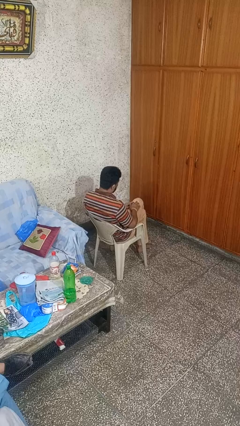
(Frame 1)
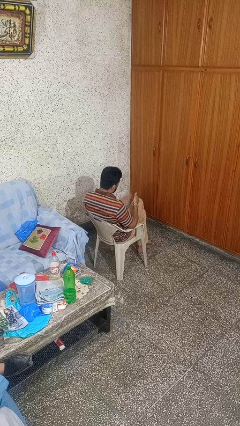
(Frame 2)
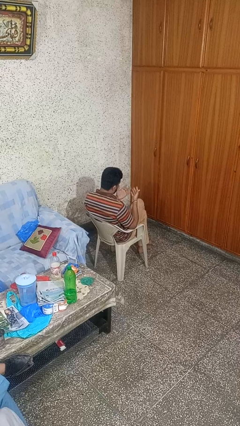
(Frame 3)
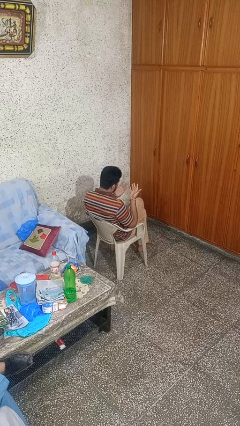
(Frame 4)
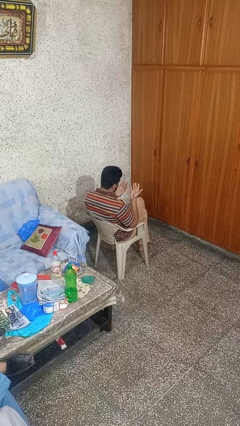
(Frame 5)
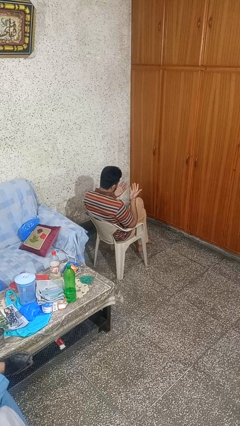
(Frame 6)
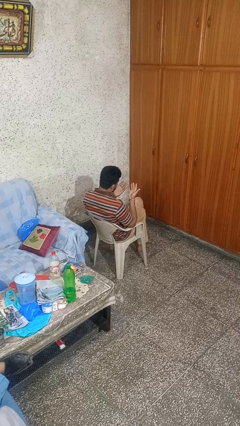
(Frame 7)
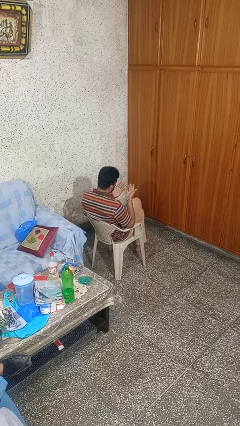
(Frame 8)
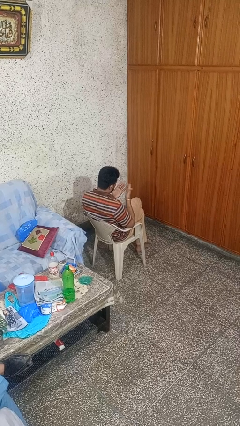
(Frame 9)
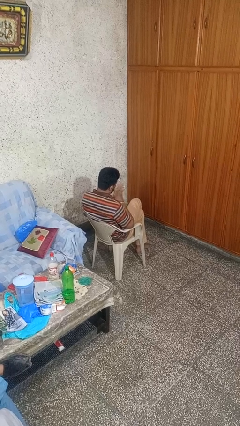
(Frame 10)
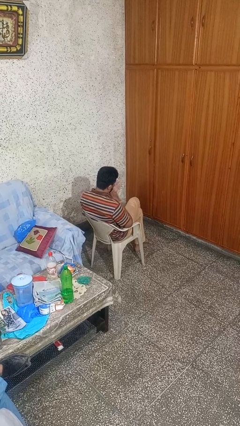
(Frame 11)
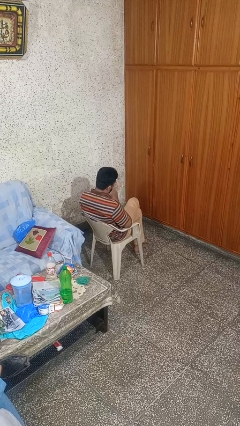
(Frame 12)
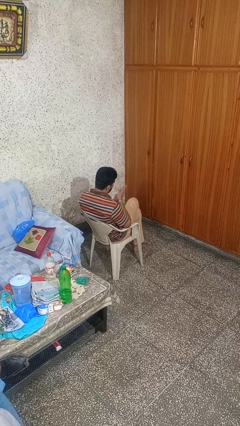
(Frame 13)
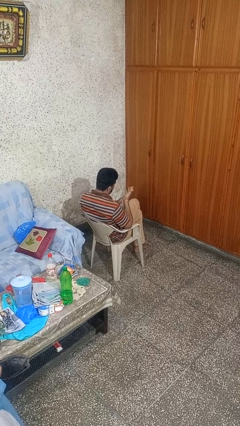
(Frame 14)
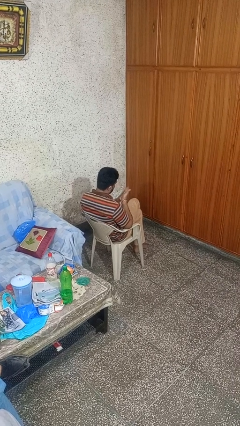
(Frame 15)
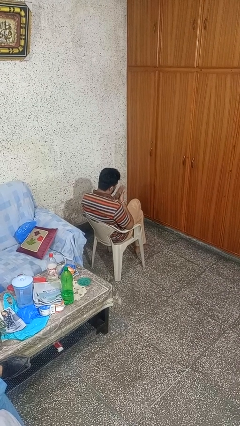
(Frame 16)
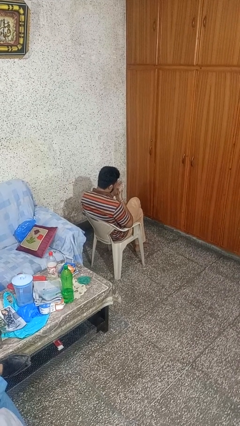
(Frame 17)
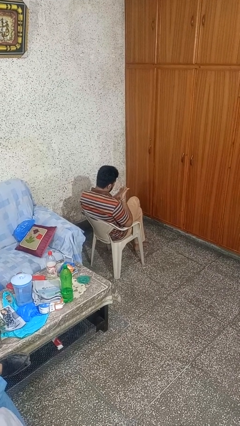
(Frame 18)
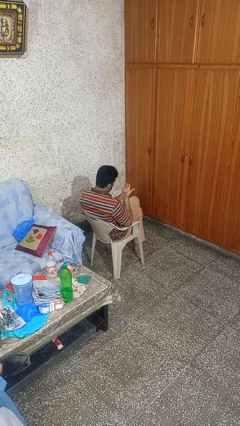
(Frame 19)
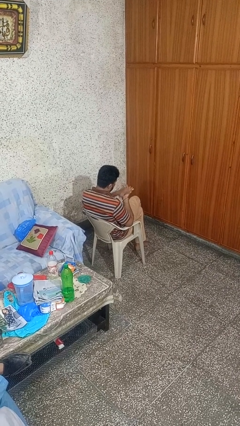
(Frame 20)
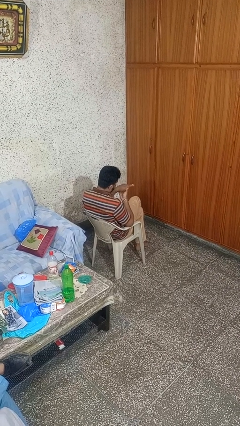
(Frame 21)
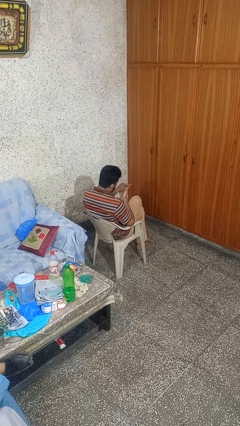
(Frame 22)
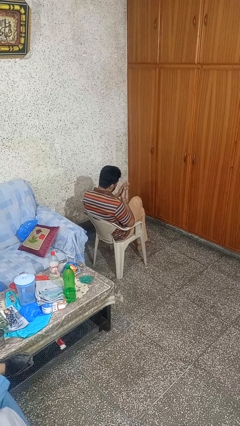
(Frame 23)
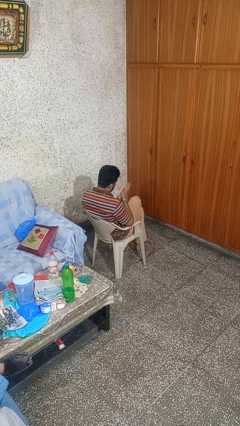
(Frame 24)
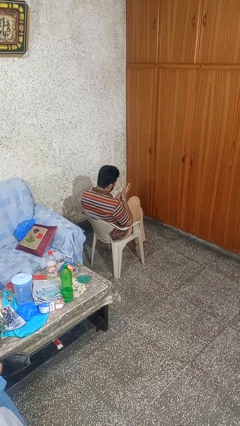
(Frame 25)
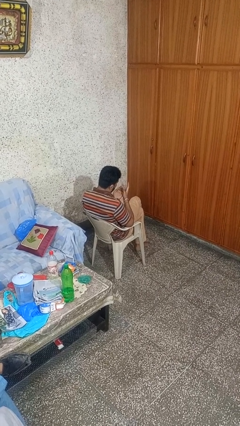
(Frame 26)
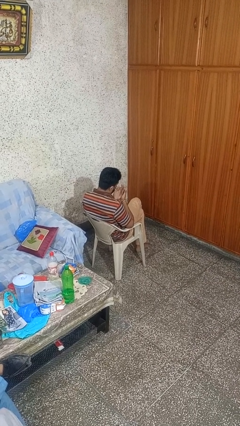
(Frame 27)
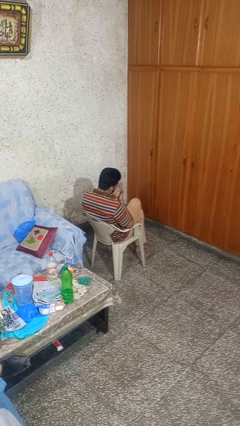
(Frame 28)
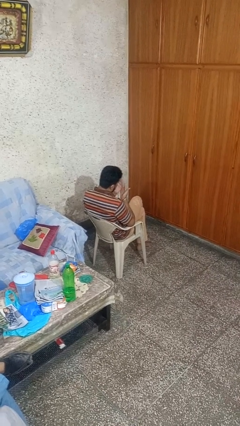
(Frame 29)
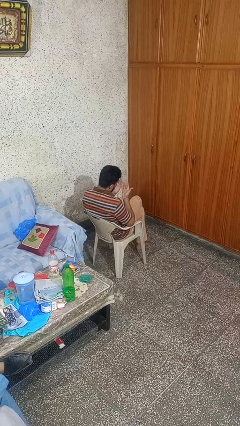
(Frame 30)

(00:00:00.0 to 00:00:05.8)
person looks at hands in lap

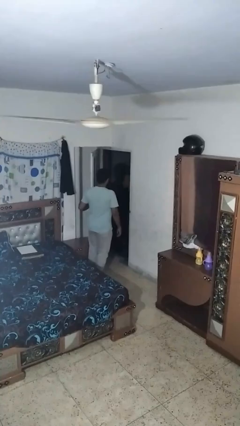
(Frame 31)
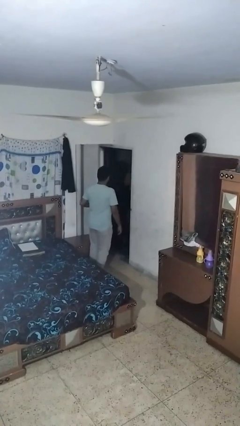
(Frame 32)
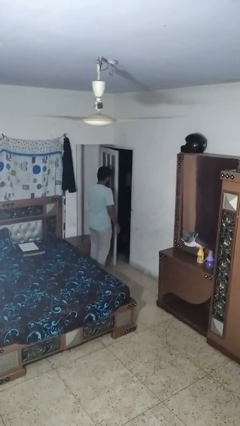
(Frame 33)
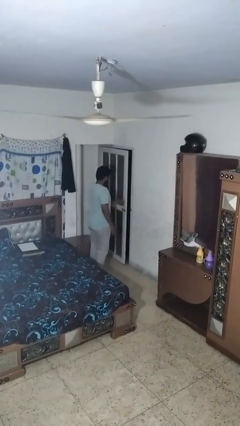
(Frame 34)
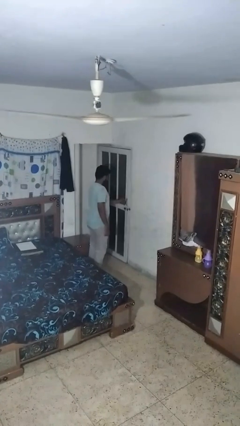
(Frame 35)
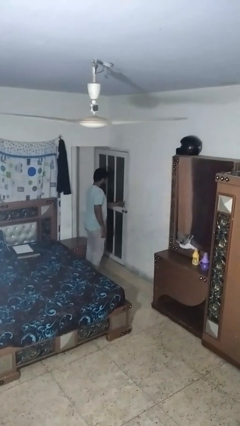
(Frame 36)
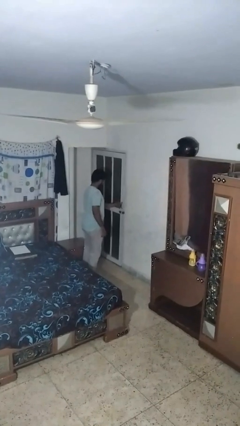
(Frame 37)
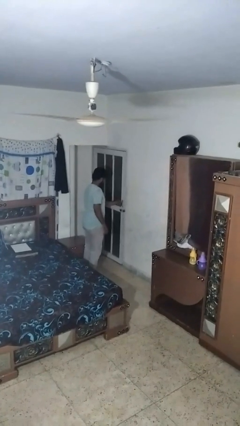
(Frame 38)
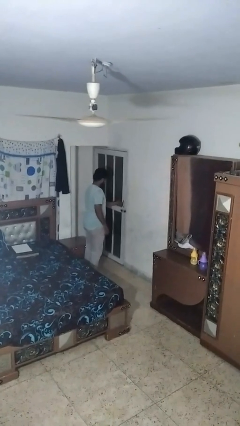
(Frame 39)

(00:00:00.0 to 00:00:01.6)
person closes facility door

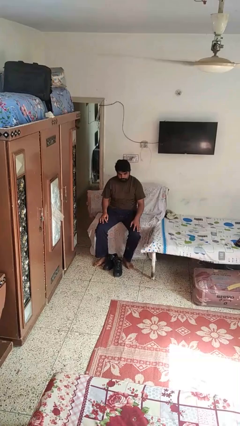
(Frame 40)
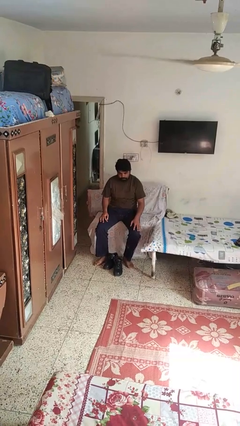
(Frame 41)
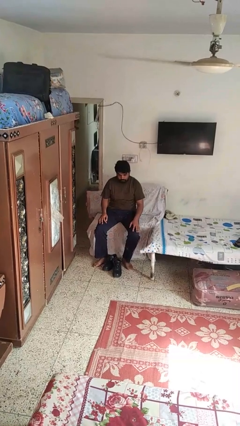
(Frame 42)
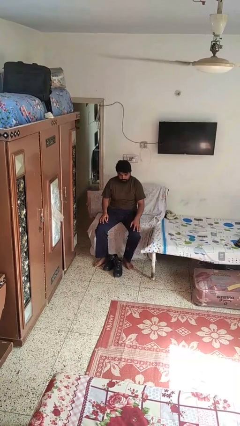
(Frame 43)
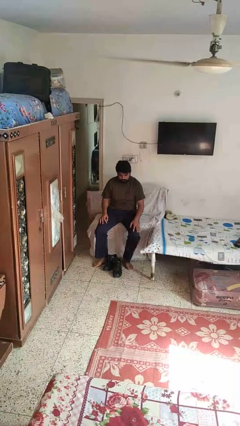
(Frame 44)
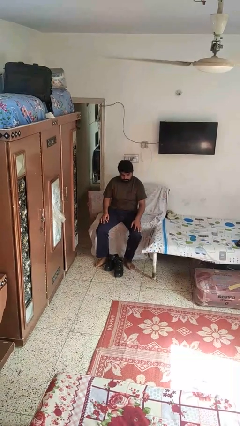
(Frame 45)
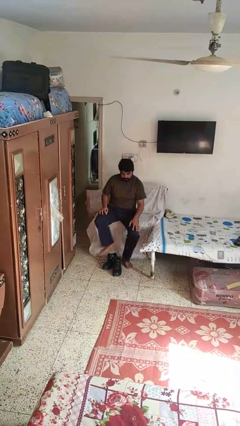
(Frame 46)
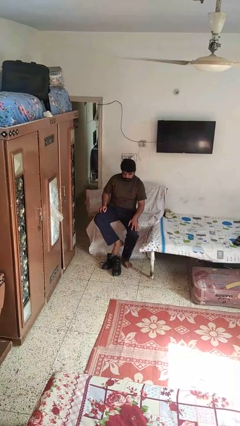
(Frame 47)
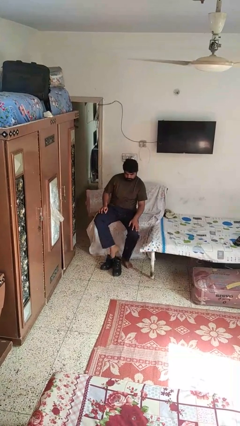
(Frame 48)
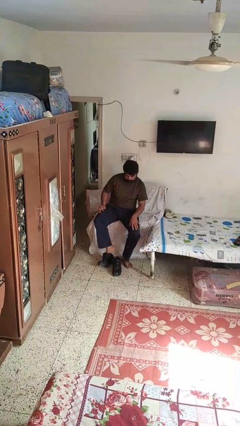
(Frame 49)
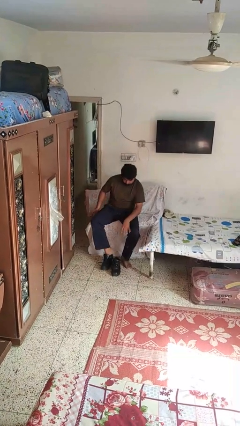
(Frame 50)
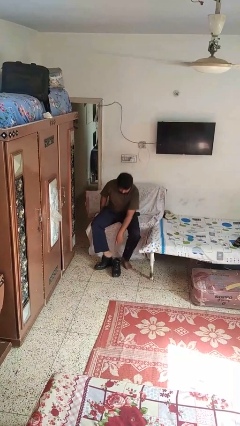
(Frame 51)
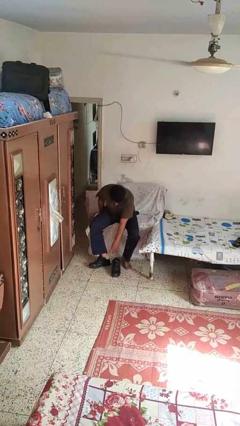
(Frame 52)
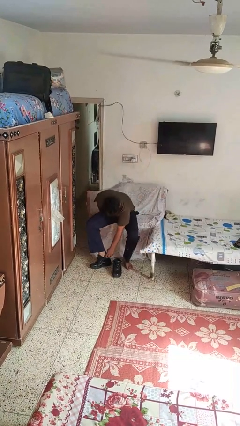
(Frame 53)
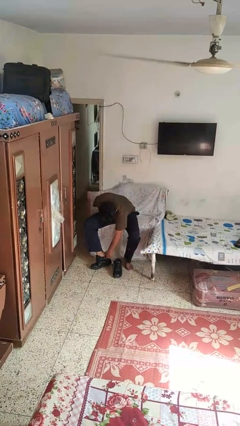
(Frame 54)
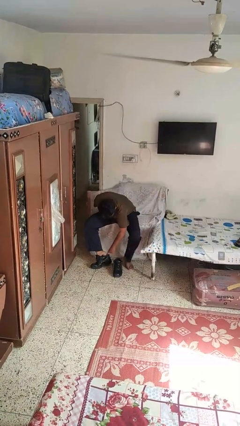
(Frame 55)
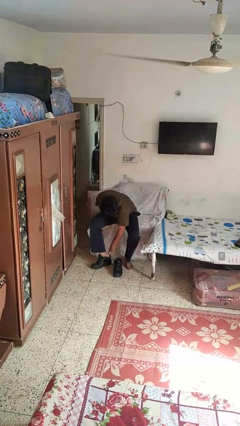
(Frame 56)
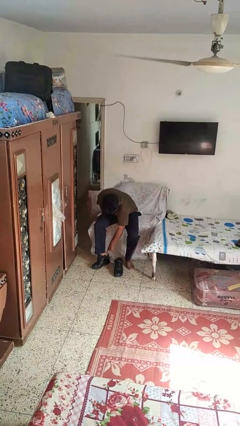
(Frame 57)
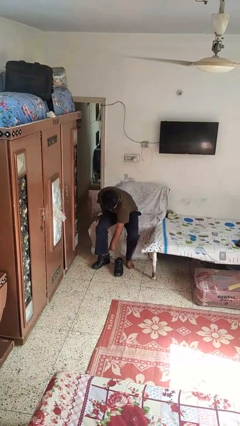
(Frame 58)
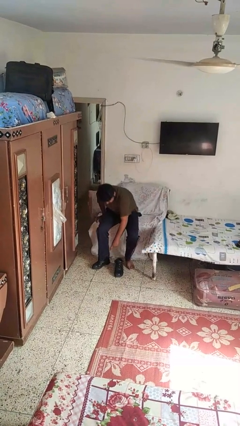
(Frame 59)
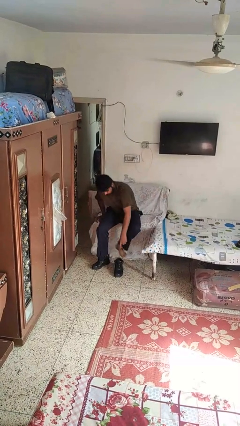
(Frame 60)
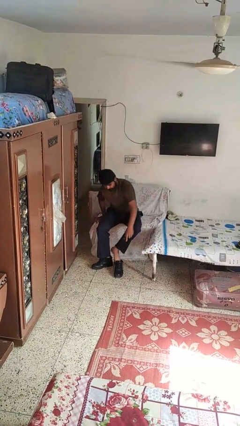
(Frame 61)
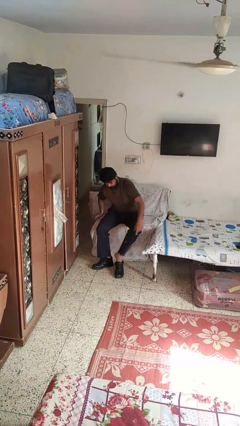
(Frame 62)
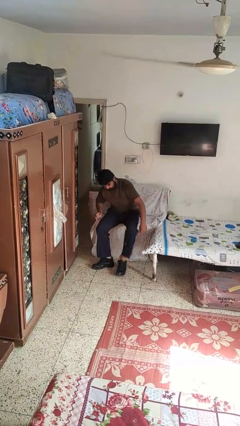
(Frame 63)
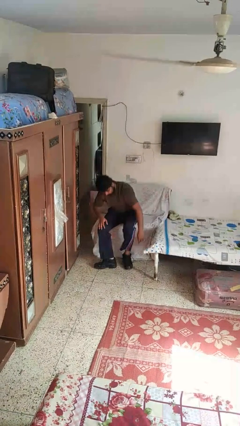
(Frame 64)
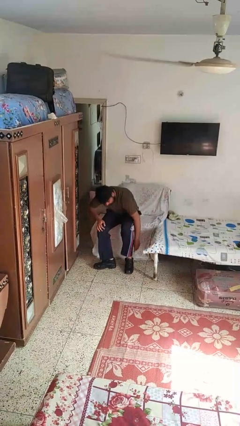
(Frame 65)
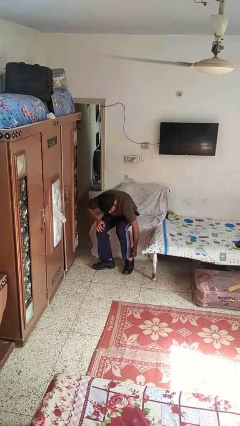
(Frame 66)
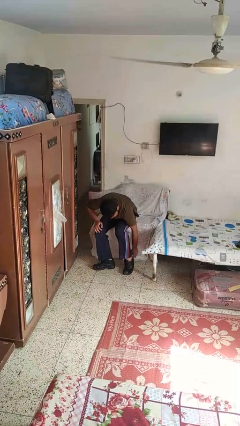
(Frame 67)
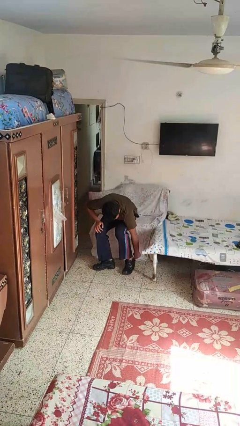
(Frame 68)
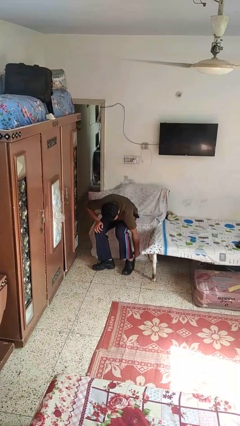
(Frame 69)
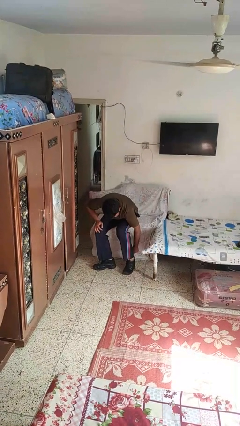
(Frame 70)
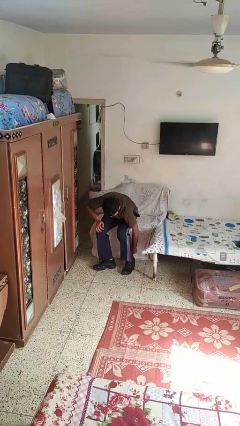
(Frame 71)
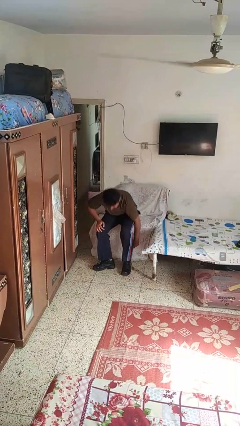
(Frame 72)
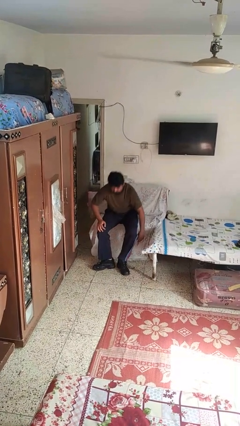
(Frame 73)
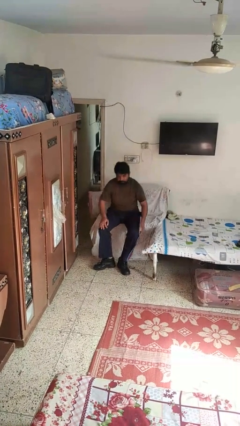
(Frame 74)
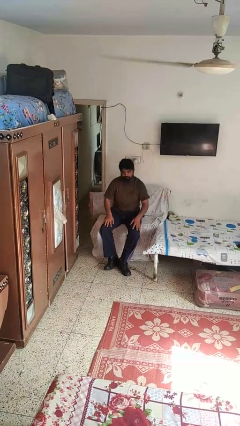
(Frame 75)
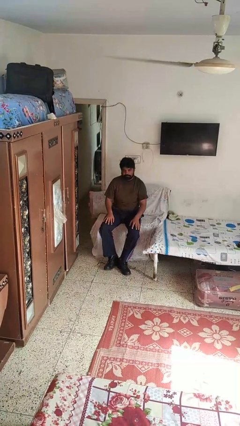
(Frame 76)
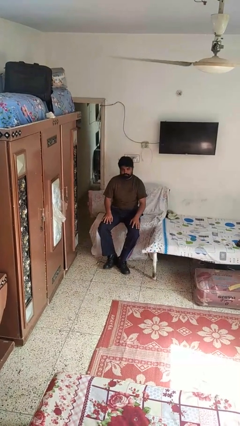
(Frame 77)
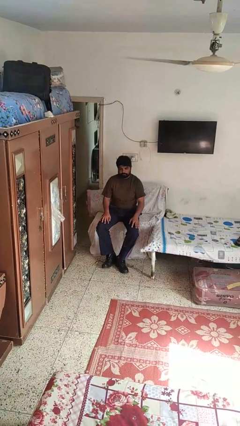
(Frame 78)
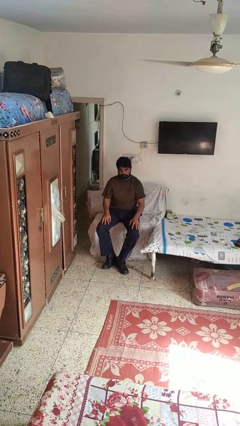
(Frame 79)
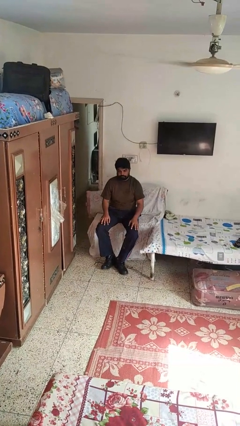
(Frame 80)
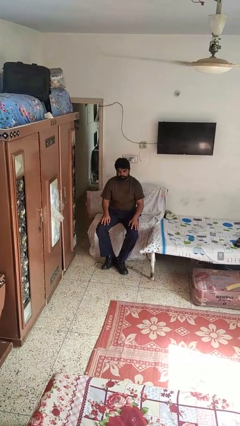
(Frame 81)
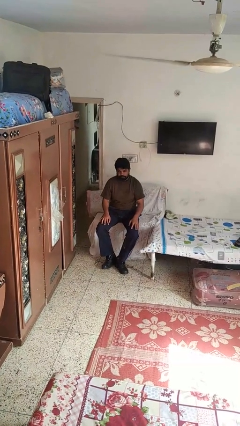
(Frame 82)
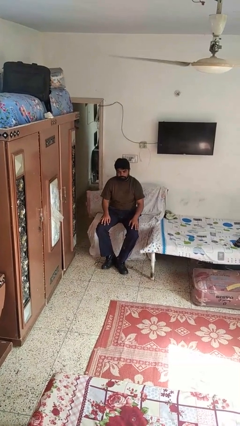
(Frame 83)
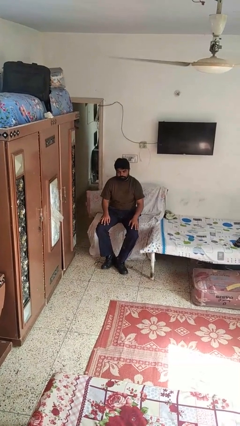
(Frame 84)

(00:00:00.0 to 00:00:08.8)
person puts on boots

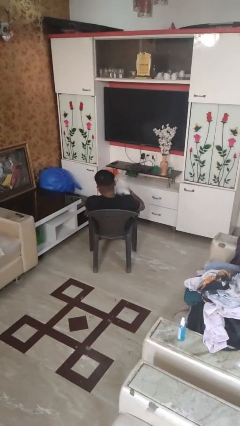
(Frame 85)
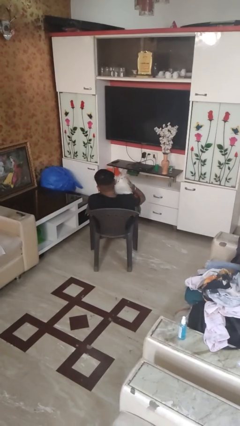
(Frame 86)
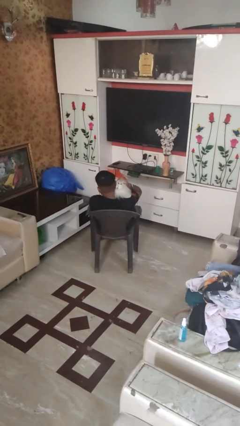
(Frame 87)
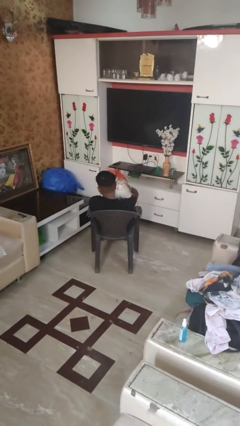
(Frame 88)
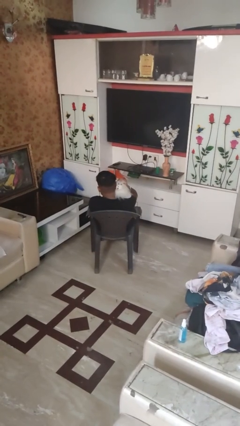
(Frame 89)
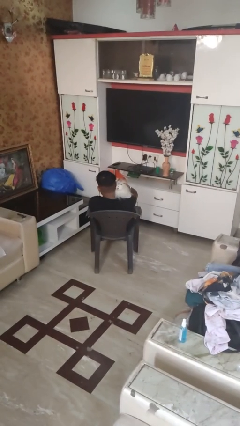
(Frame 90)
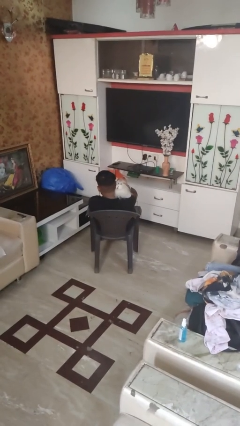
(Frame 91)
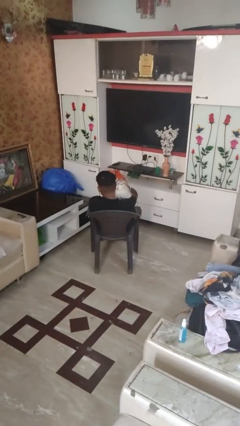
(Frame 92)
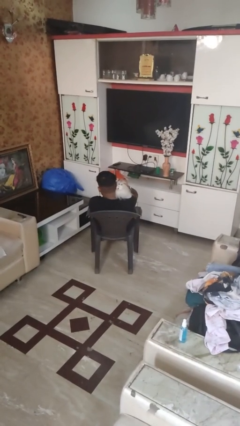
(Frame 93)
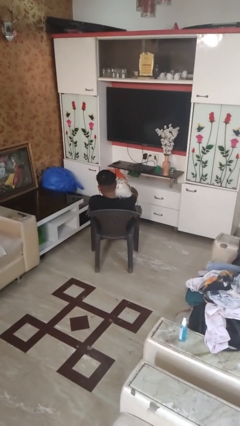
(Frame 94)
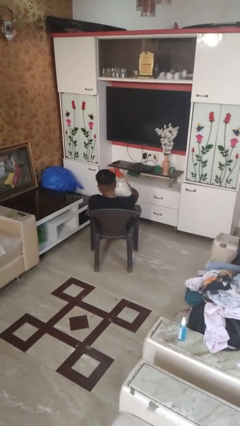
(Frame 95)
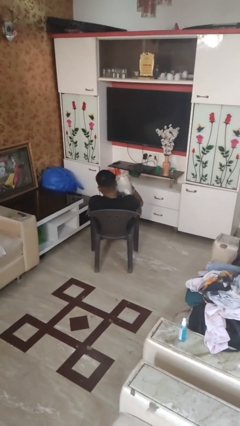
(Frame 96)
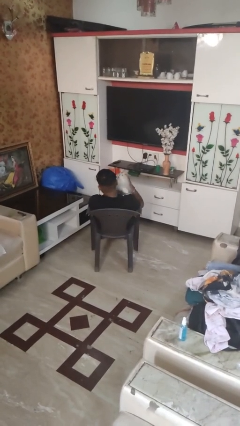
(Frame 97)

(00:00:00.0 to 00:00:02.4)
person hugs stuffed animal
